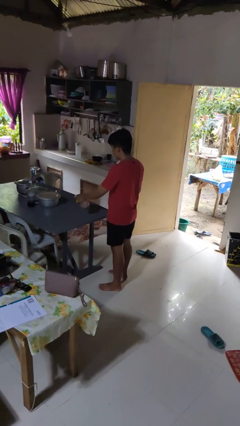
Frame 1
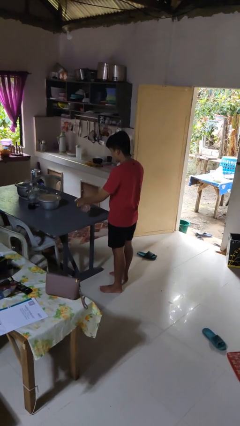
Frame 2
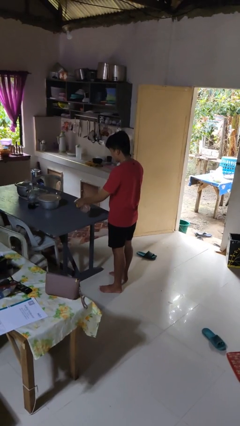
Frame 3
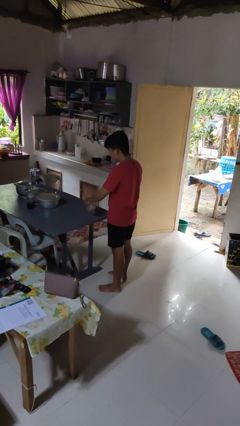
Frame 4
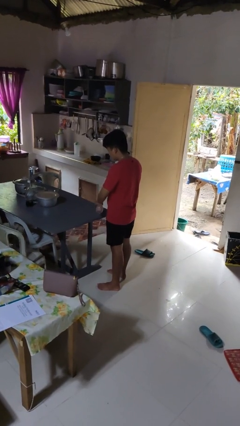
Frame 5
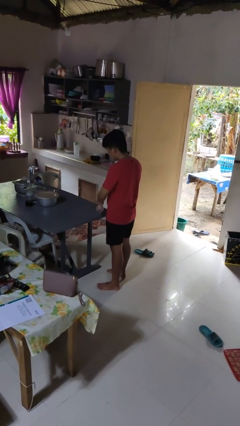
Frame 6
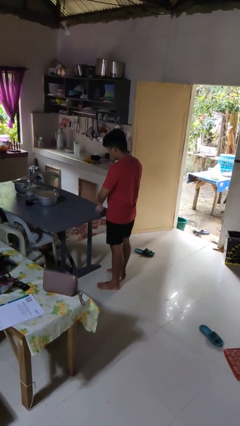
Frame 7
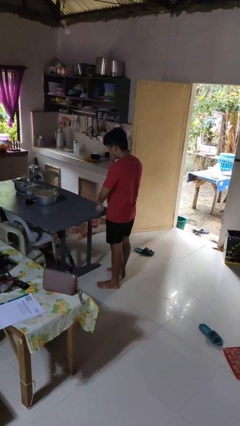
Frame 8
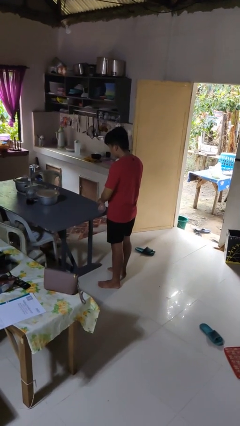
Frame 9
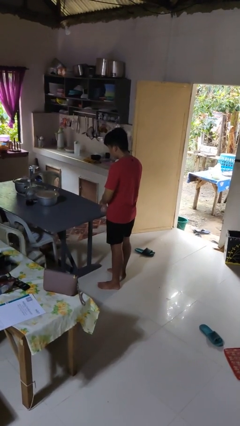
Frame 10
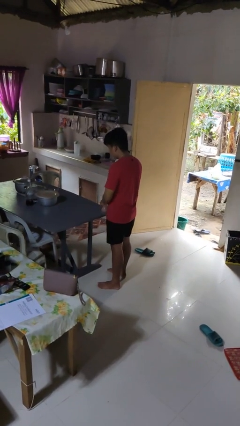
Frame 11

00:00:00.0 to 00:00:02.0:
person sprays from bottle

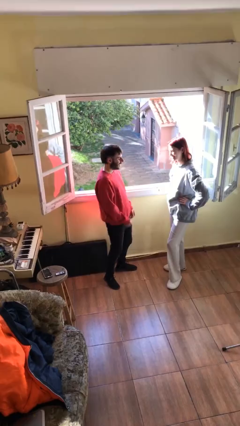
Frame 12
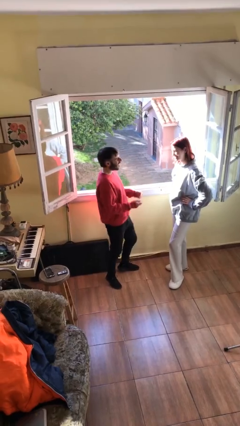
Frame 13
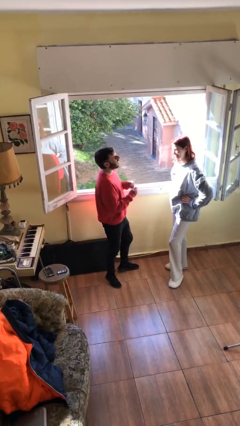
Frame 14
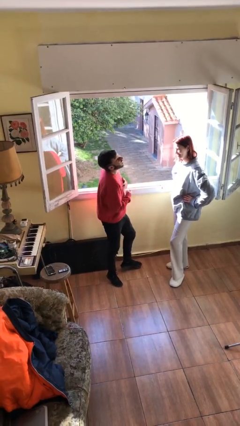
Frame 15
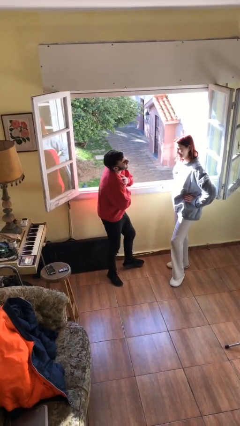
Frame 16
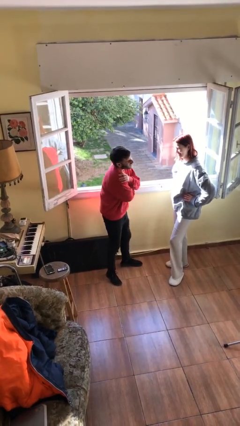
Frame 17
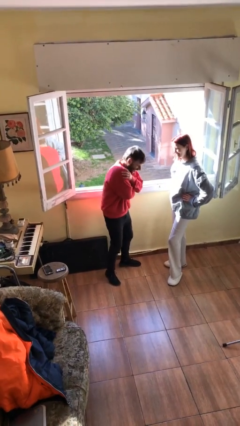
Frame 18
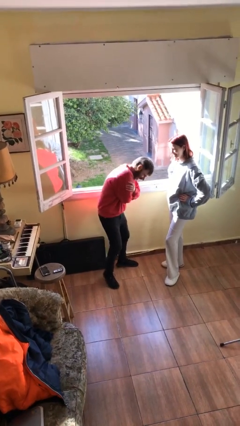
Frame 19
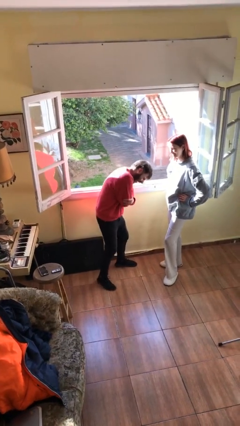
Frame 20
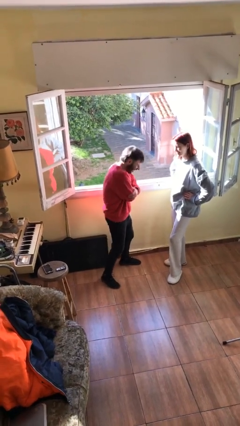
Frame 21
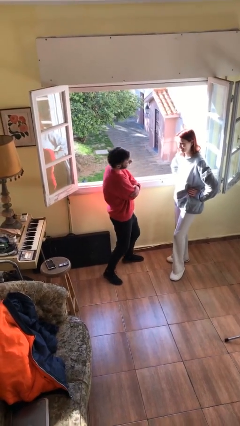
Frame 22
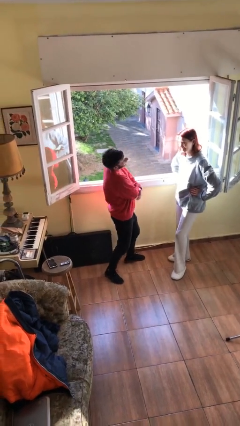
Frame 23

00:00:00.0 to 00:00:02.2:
person laughs with person

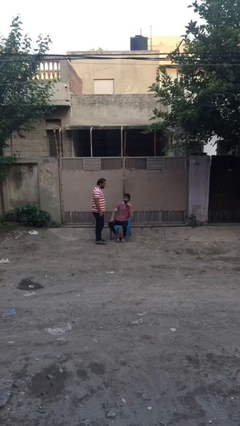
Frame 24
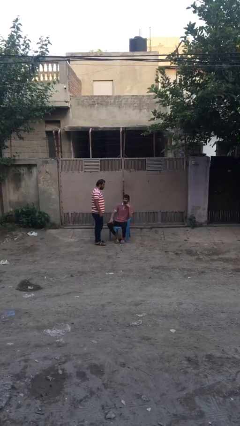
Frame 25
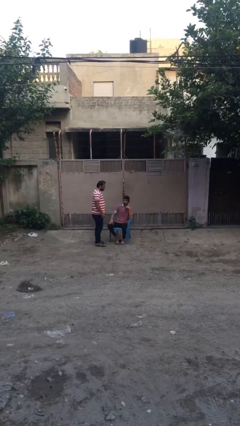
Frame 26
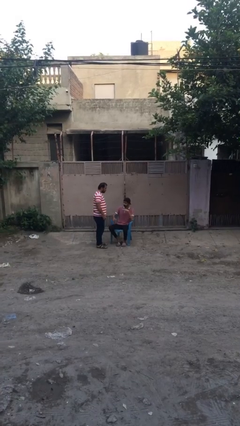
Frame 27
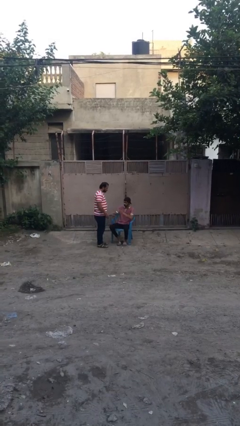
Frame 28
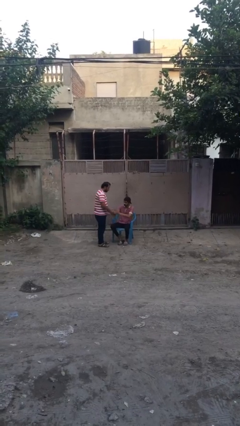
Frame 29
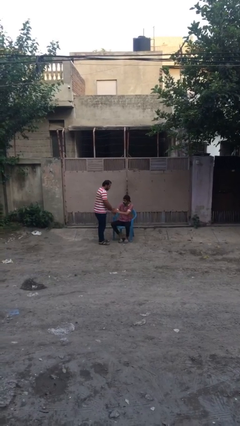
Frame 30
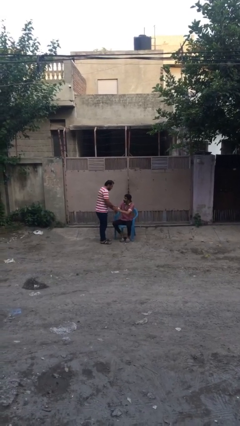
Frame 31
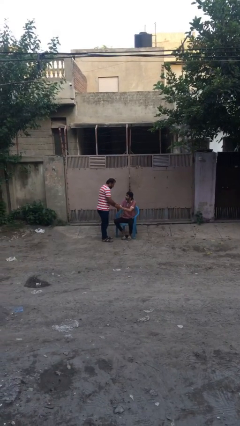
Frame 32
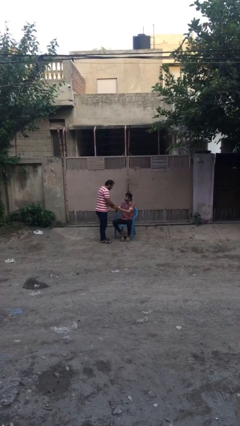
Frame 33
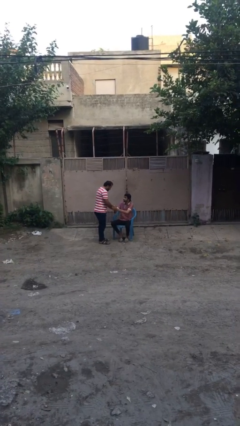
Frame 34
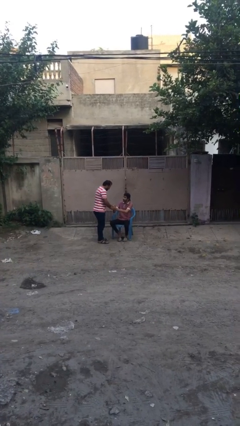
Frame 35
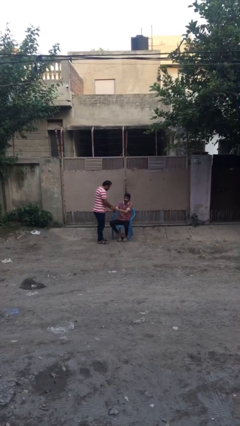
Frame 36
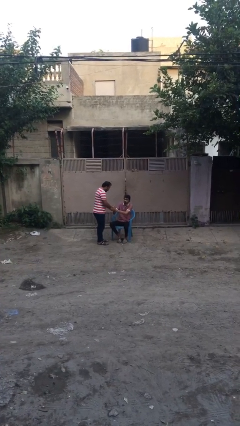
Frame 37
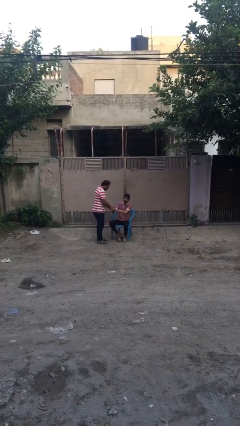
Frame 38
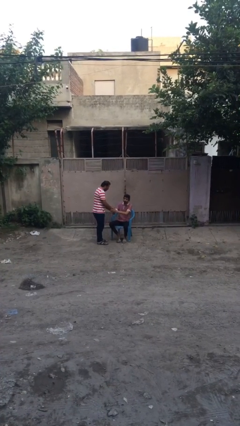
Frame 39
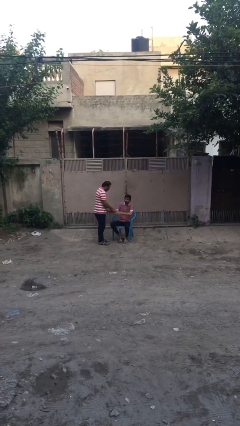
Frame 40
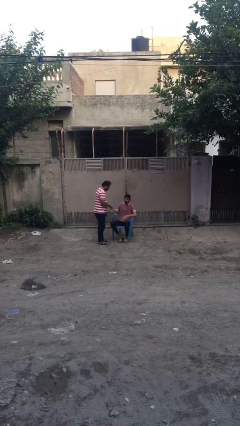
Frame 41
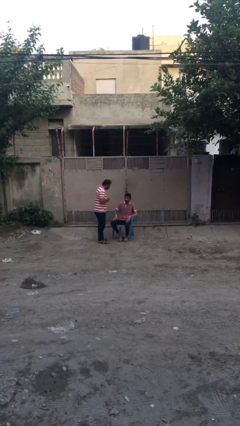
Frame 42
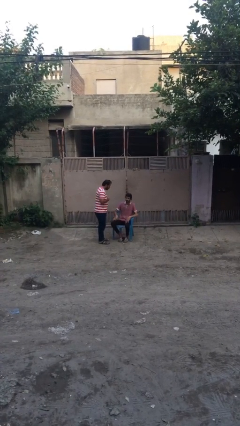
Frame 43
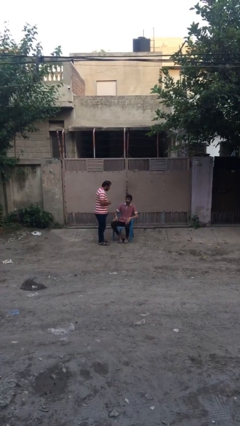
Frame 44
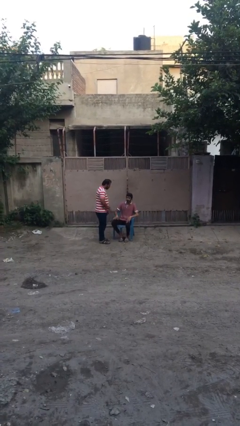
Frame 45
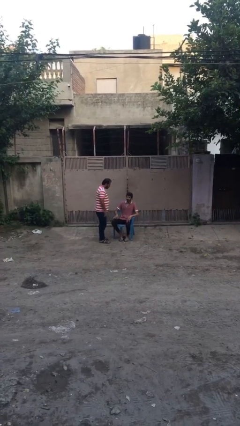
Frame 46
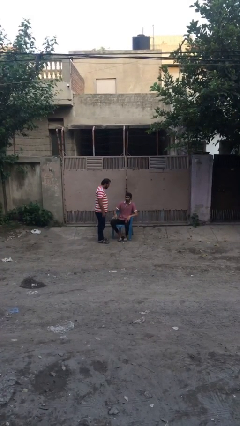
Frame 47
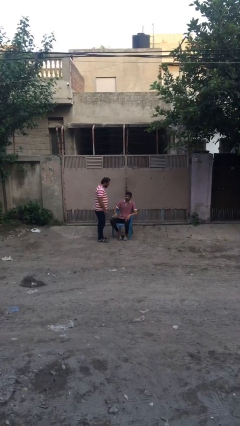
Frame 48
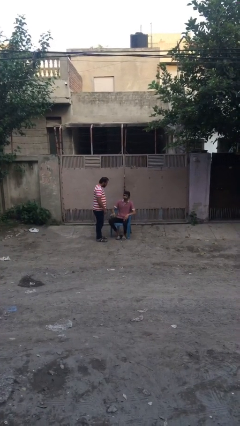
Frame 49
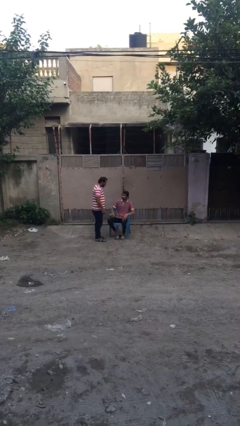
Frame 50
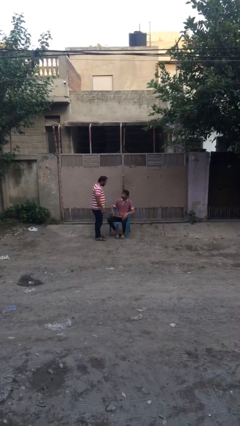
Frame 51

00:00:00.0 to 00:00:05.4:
person shakes hand

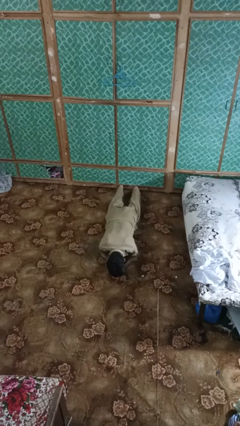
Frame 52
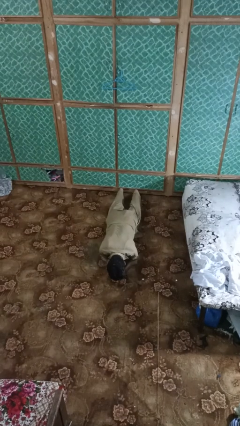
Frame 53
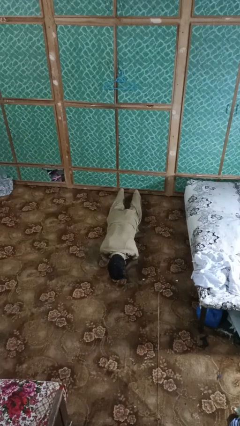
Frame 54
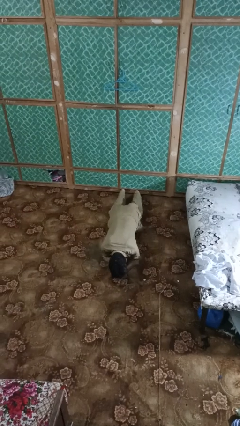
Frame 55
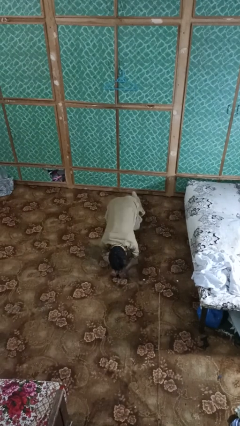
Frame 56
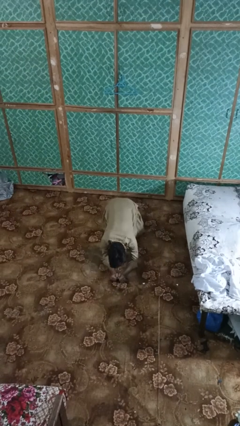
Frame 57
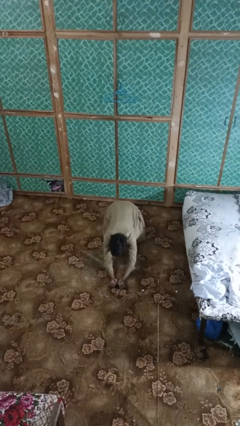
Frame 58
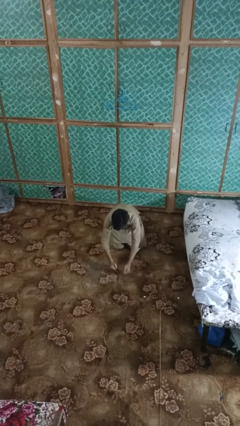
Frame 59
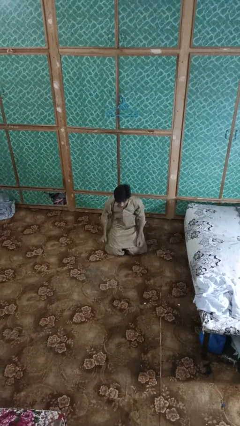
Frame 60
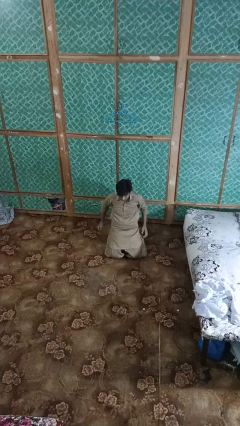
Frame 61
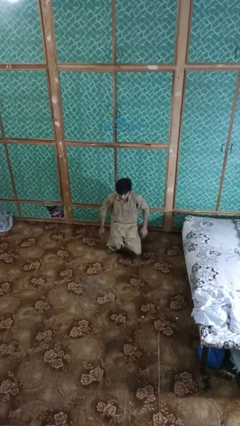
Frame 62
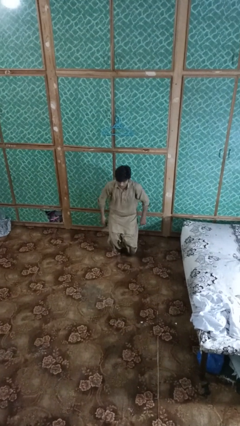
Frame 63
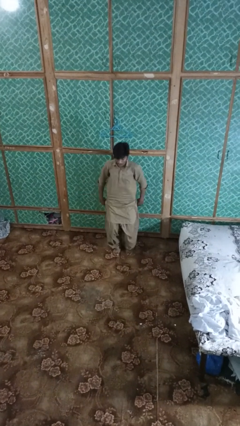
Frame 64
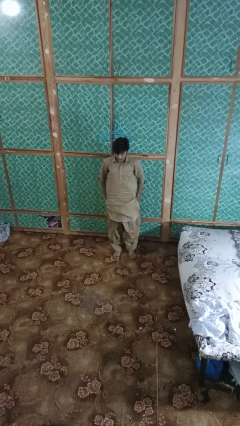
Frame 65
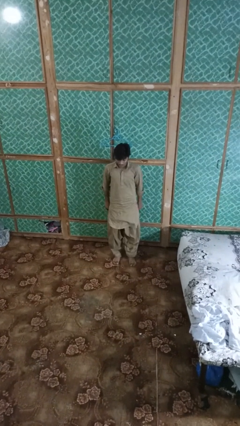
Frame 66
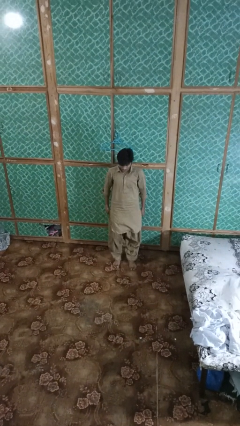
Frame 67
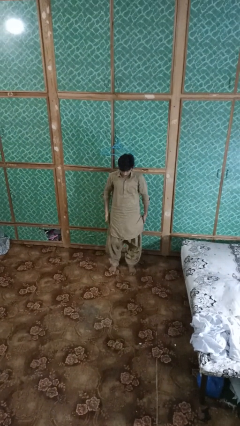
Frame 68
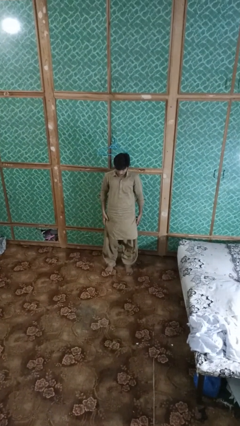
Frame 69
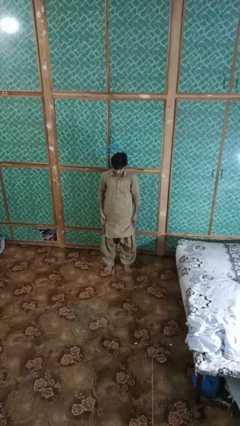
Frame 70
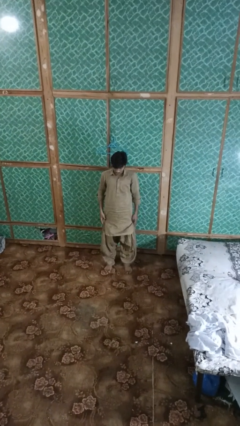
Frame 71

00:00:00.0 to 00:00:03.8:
person stands up from floor

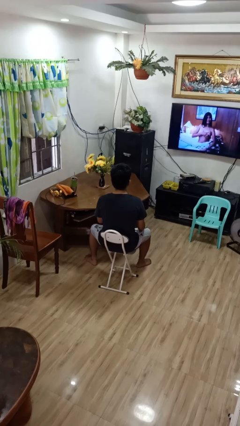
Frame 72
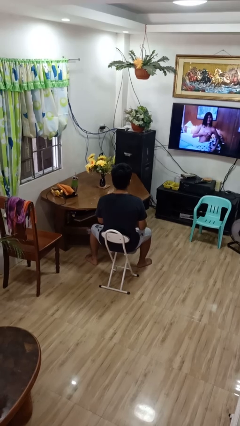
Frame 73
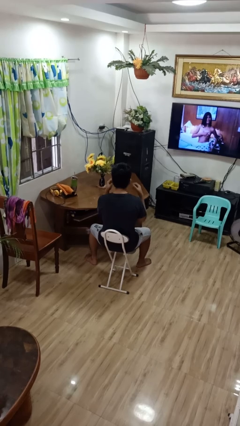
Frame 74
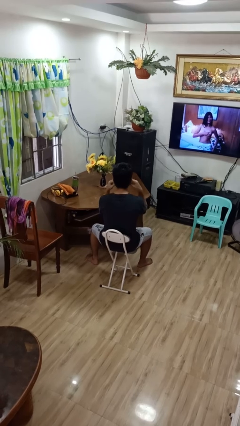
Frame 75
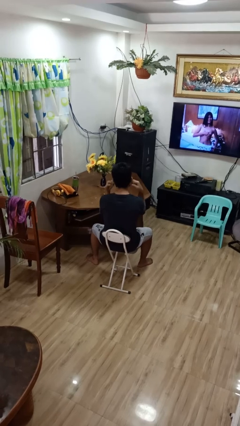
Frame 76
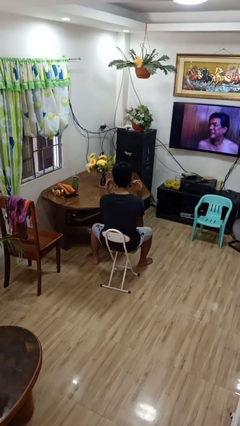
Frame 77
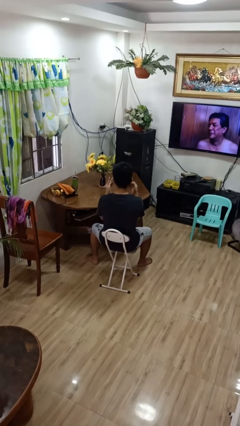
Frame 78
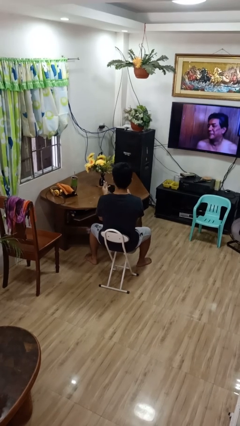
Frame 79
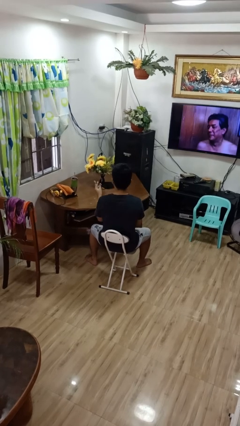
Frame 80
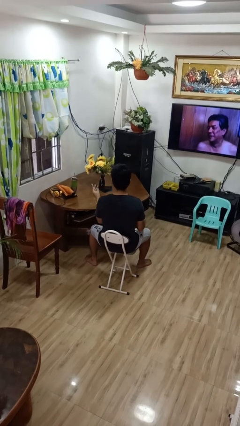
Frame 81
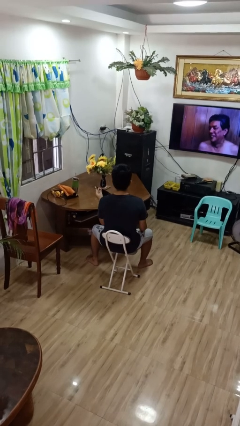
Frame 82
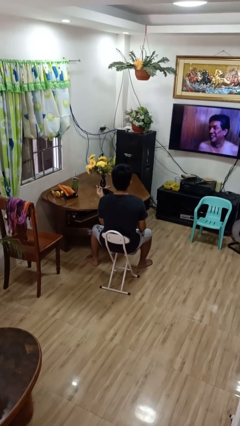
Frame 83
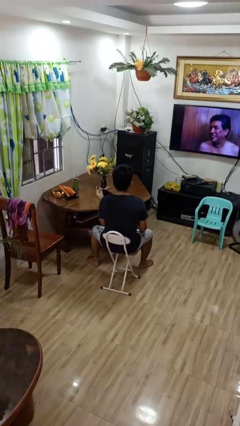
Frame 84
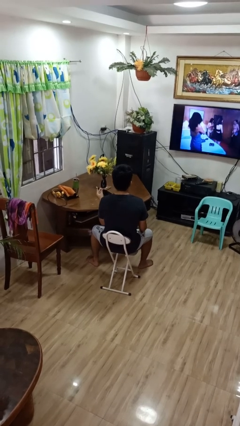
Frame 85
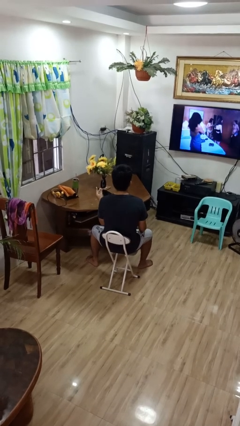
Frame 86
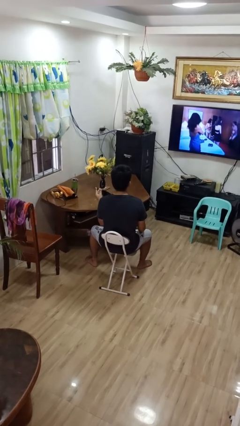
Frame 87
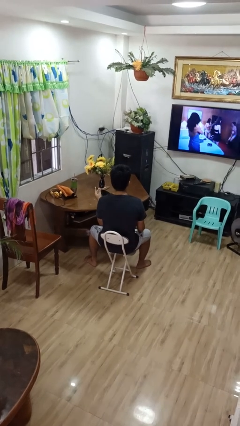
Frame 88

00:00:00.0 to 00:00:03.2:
person takes off facemask

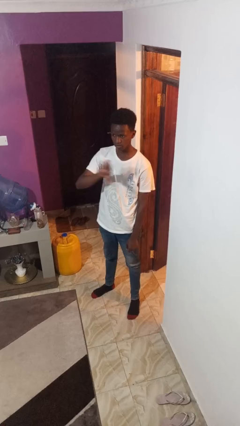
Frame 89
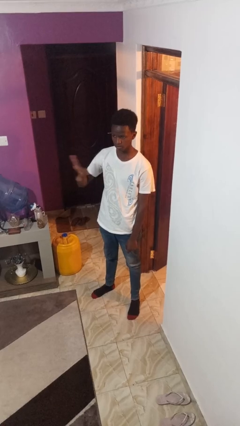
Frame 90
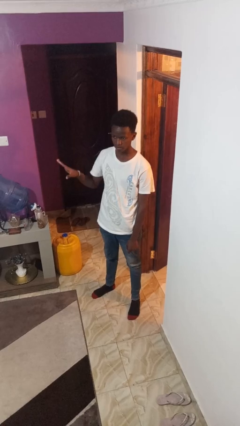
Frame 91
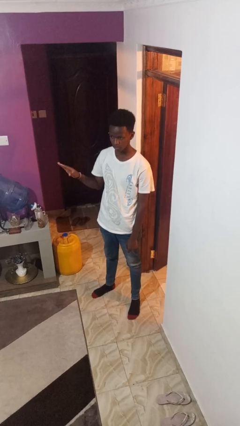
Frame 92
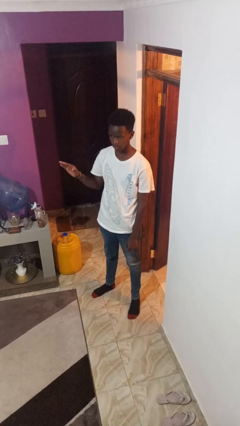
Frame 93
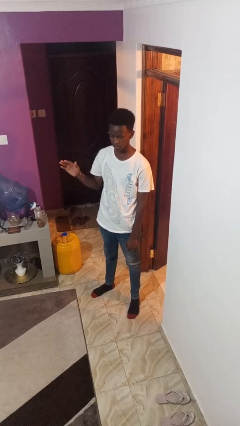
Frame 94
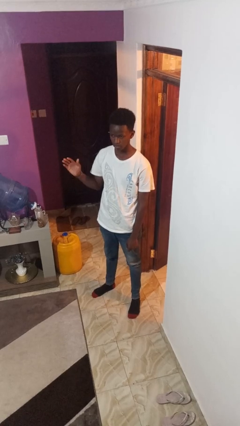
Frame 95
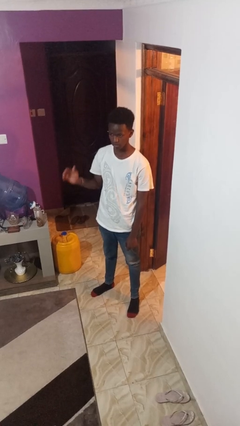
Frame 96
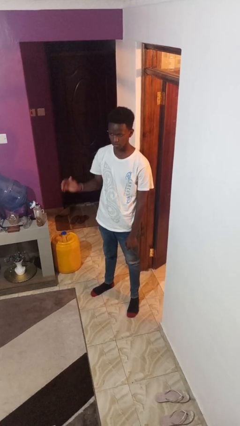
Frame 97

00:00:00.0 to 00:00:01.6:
person gestures swipe right
